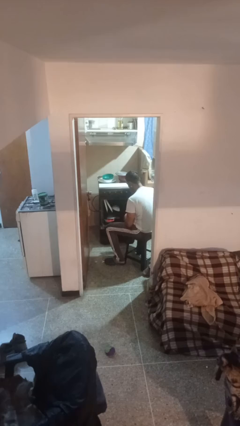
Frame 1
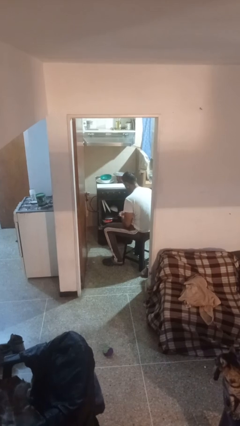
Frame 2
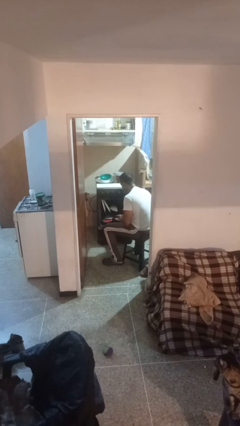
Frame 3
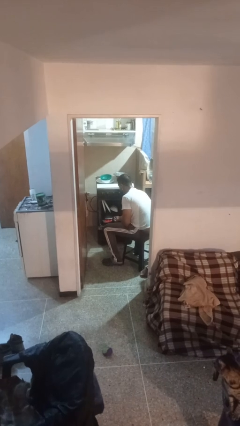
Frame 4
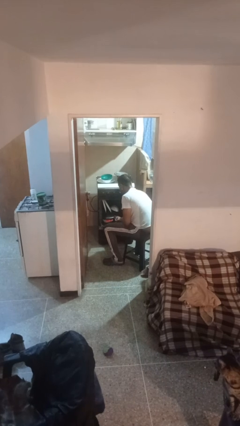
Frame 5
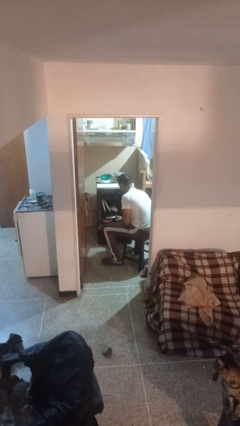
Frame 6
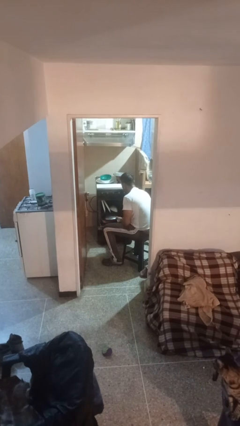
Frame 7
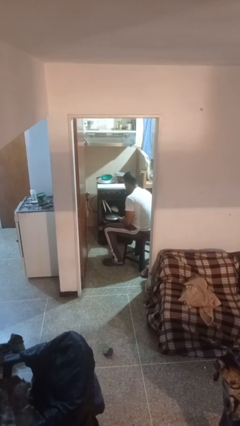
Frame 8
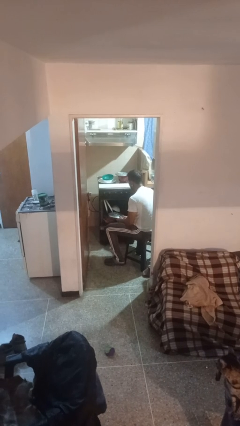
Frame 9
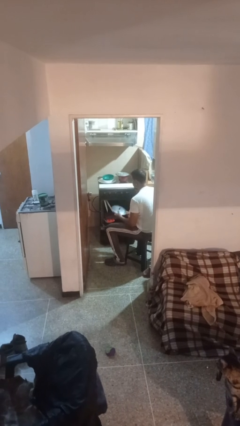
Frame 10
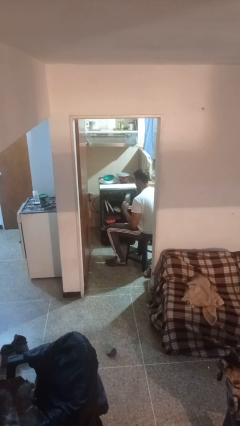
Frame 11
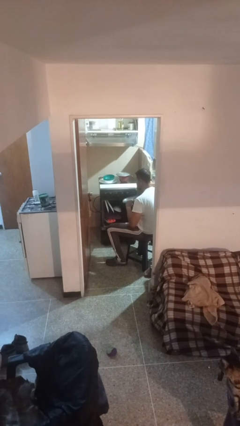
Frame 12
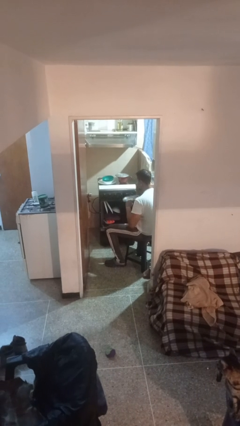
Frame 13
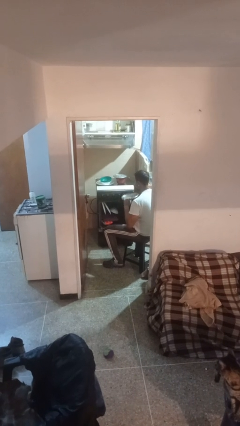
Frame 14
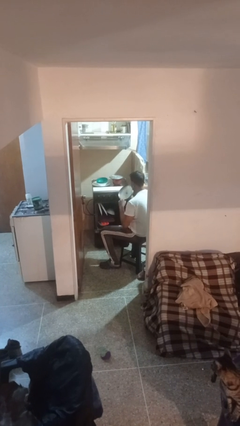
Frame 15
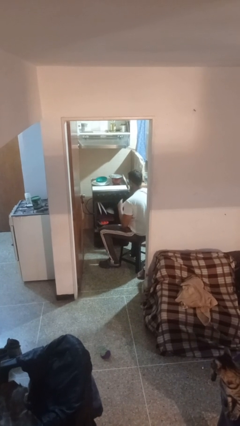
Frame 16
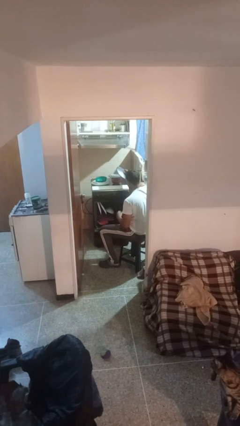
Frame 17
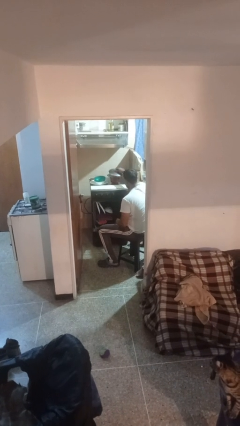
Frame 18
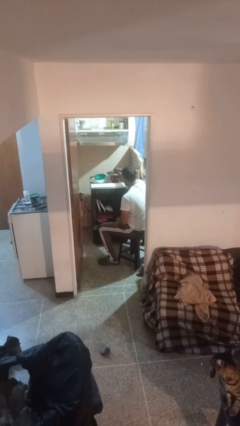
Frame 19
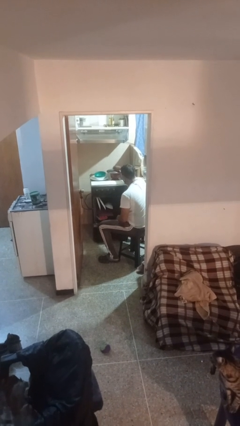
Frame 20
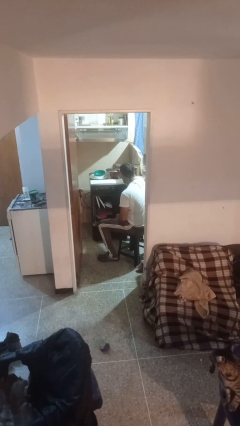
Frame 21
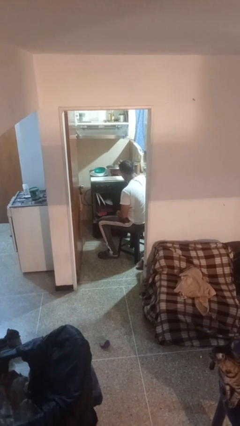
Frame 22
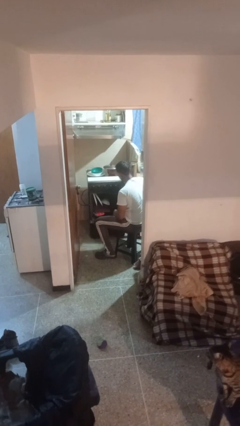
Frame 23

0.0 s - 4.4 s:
person unloads dishwasher

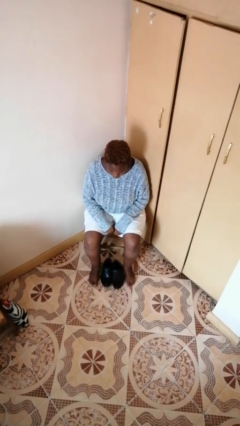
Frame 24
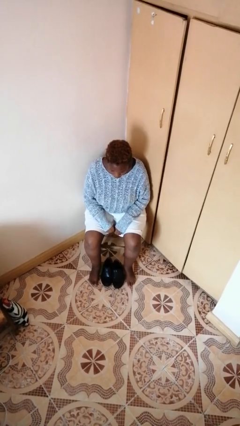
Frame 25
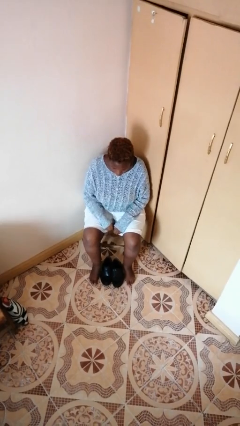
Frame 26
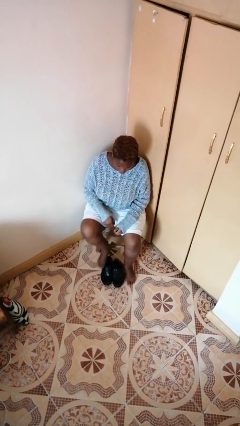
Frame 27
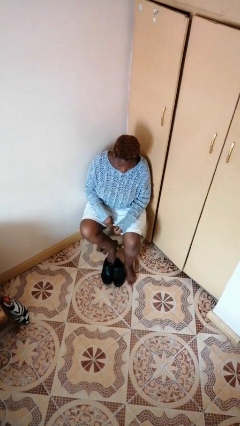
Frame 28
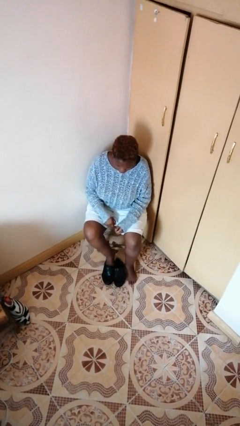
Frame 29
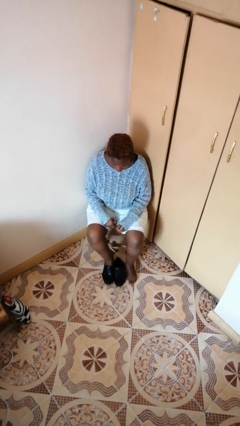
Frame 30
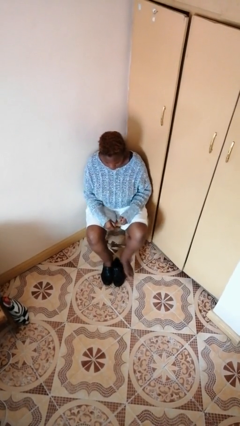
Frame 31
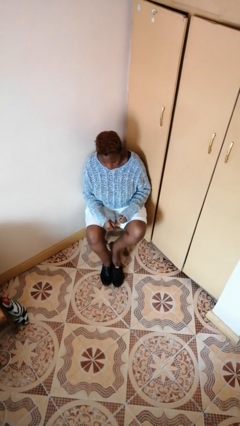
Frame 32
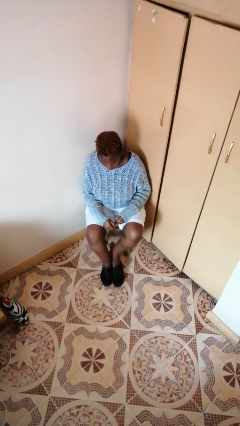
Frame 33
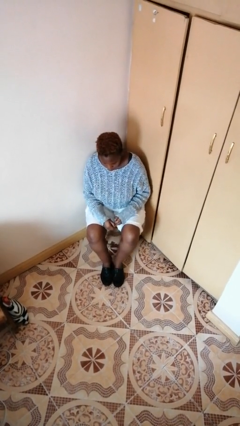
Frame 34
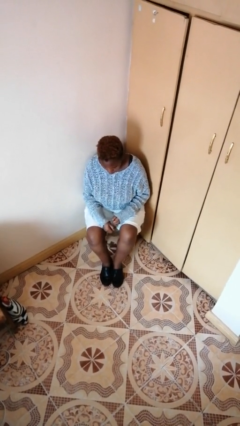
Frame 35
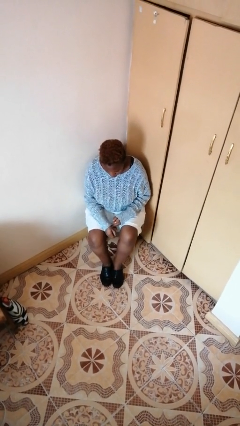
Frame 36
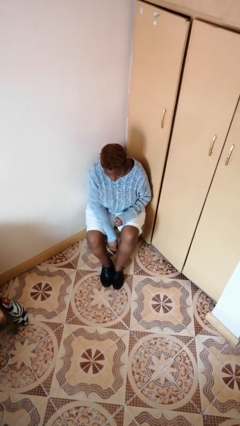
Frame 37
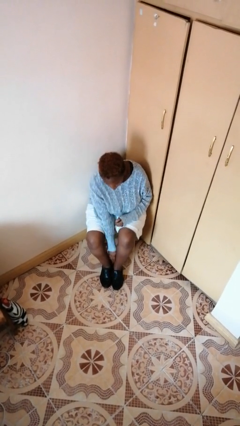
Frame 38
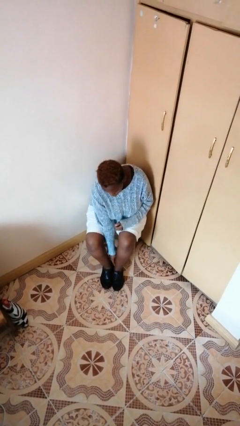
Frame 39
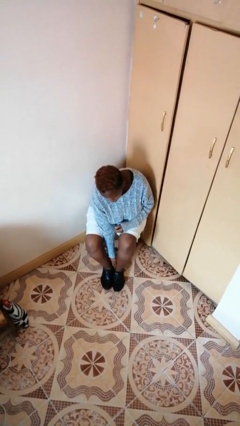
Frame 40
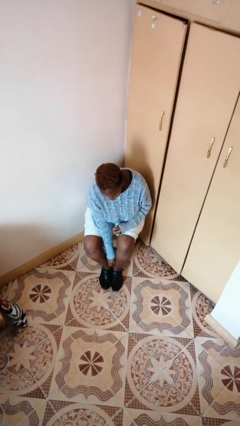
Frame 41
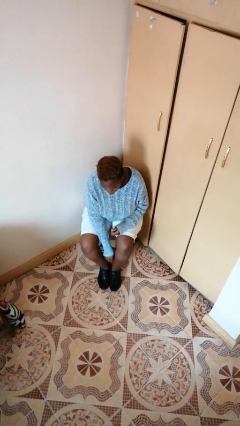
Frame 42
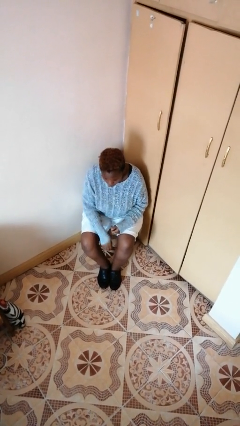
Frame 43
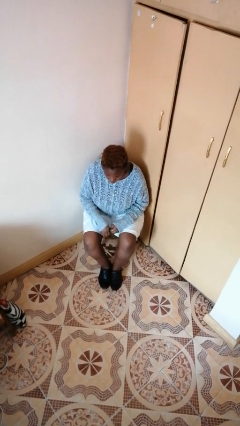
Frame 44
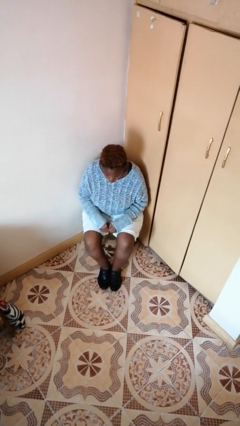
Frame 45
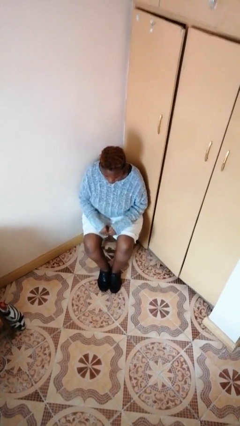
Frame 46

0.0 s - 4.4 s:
person puts on shoes

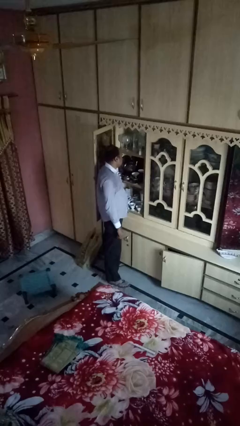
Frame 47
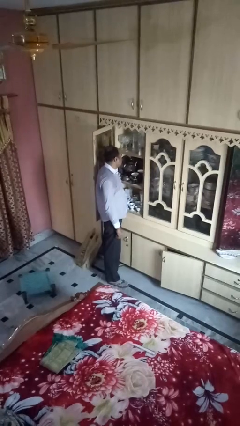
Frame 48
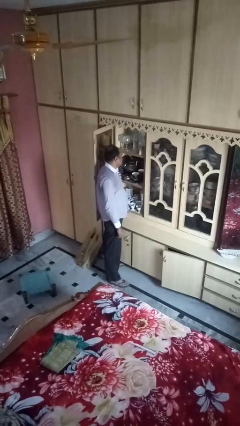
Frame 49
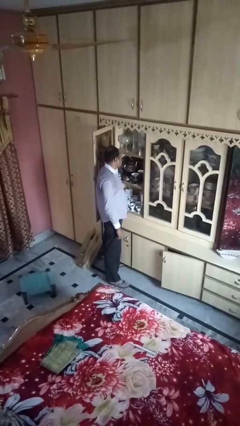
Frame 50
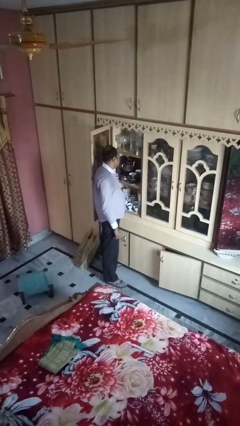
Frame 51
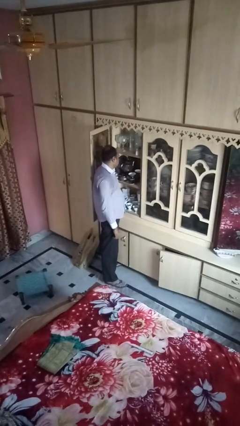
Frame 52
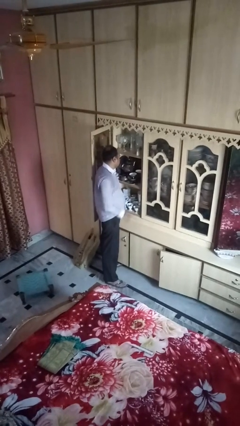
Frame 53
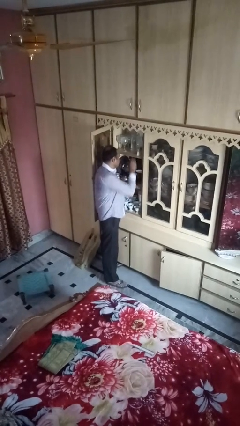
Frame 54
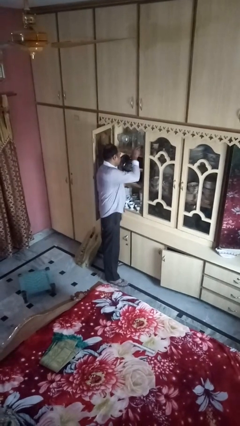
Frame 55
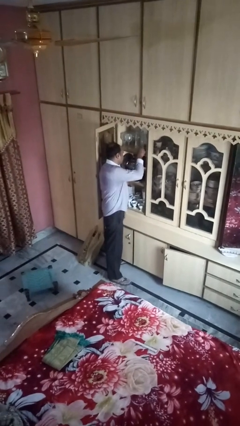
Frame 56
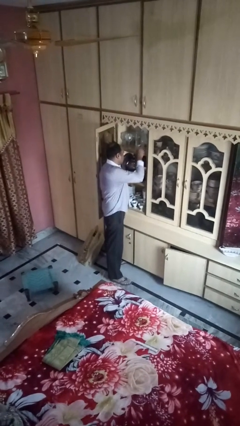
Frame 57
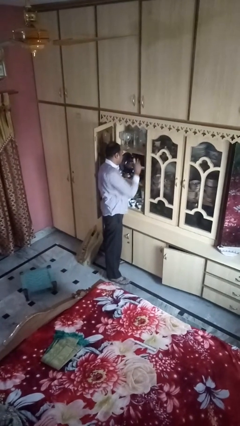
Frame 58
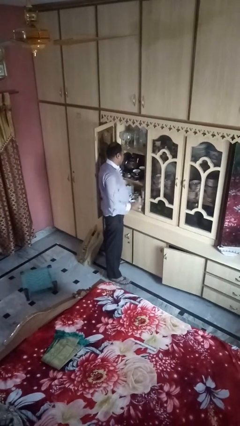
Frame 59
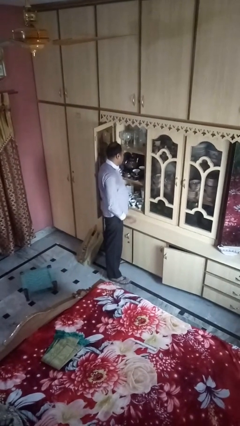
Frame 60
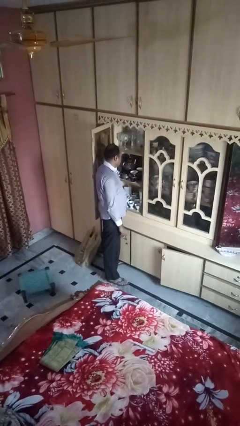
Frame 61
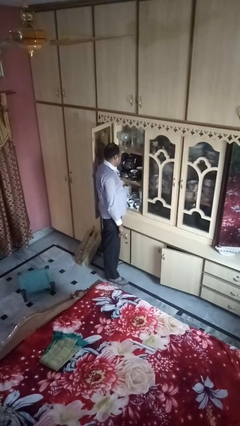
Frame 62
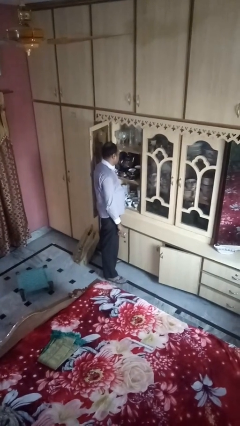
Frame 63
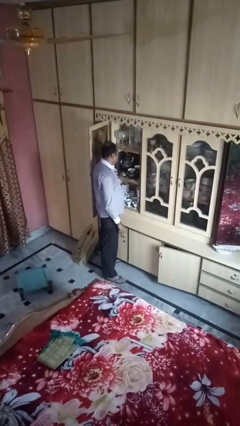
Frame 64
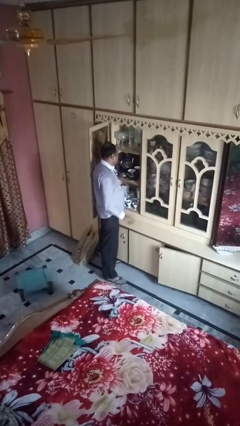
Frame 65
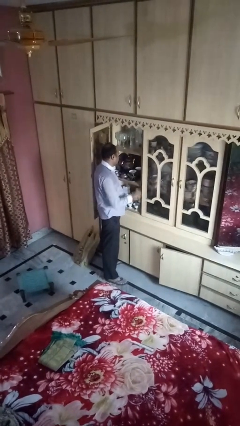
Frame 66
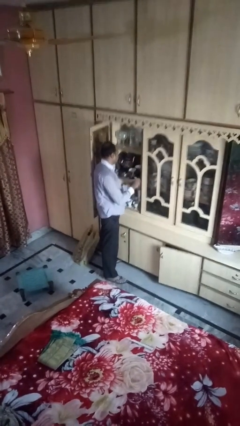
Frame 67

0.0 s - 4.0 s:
person picks up object from shelf

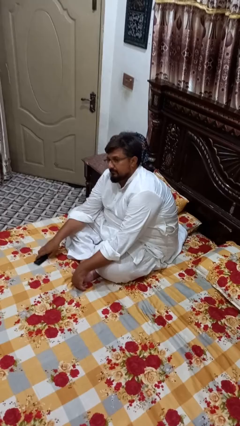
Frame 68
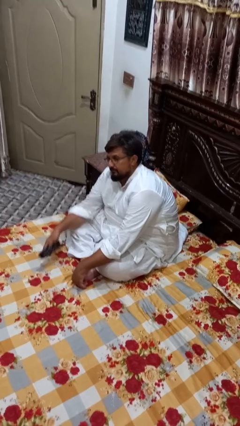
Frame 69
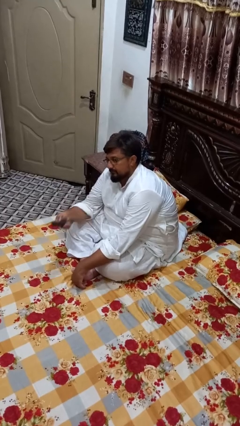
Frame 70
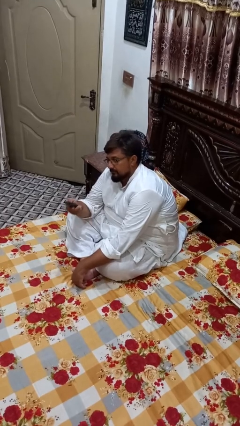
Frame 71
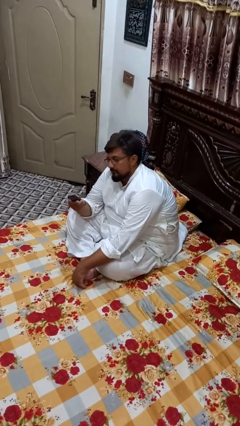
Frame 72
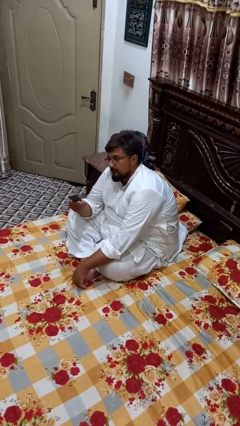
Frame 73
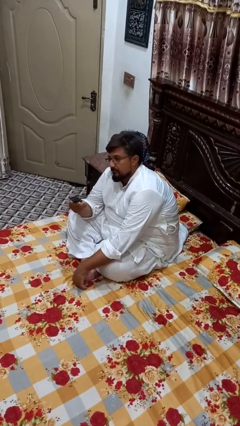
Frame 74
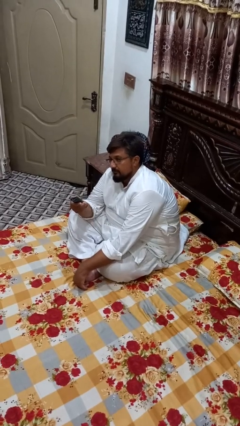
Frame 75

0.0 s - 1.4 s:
person uses television remote

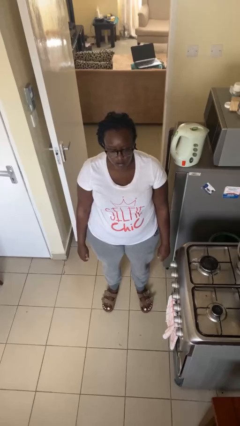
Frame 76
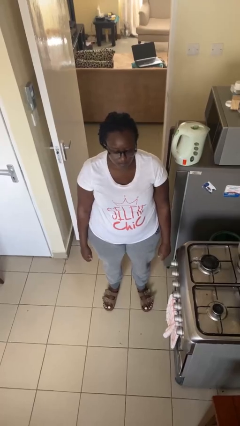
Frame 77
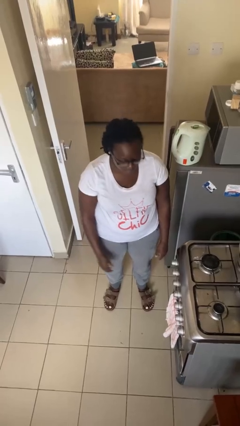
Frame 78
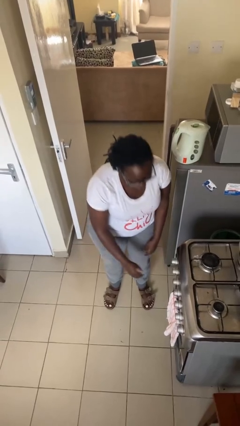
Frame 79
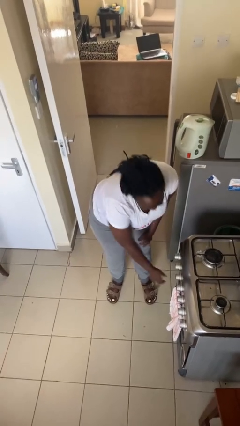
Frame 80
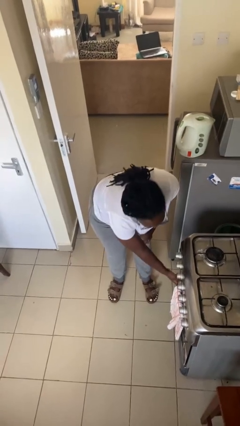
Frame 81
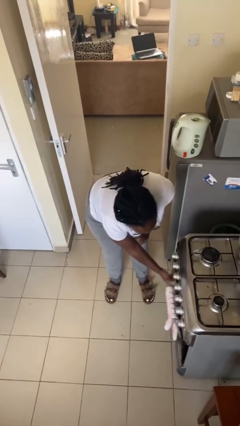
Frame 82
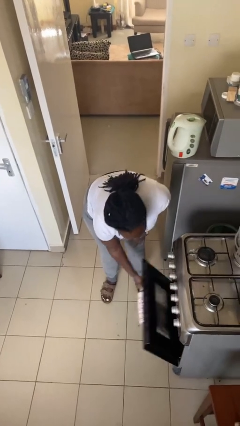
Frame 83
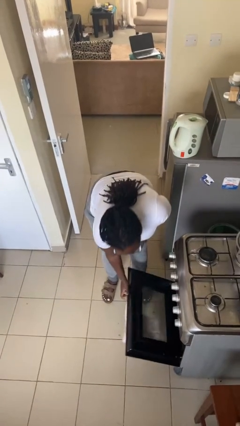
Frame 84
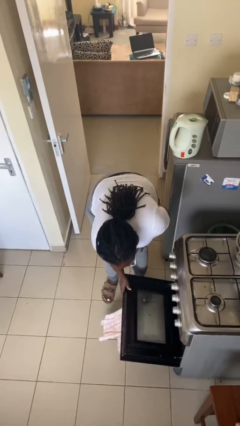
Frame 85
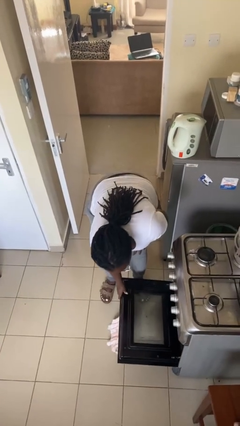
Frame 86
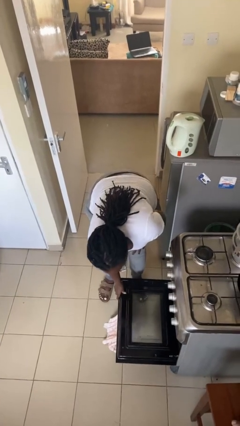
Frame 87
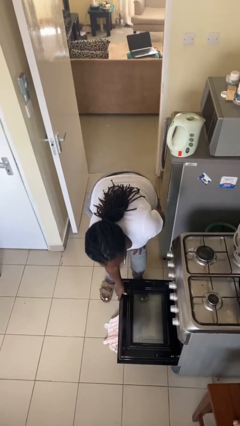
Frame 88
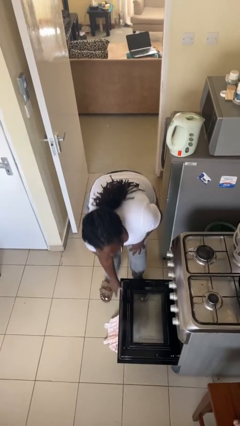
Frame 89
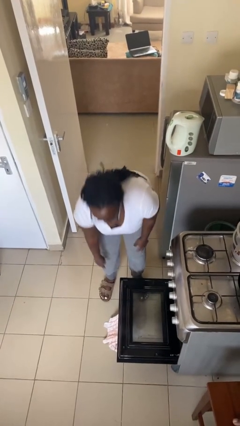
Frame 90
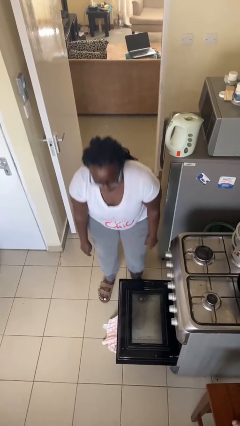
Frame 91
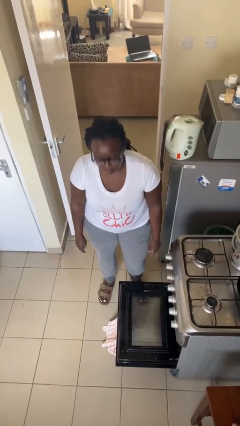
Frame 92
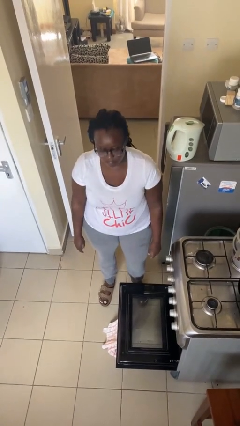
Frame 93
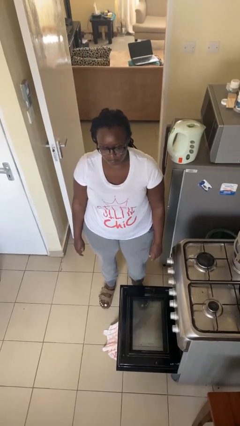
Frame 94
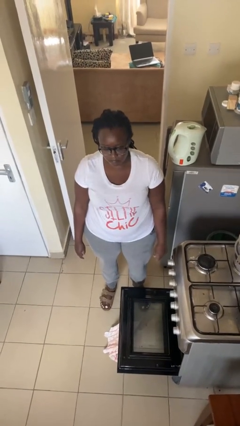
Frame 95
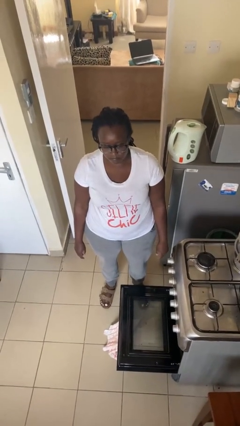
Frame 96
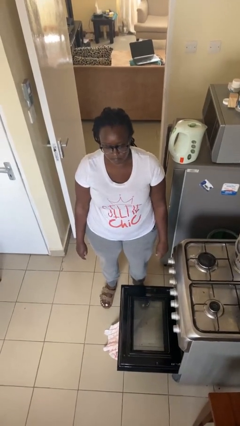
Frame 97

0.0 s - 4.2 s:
person opens oven door
